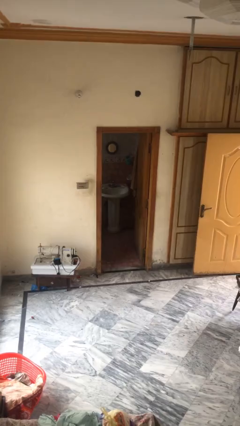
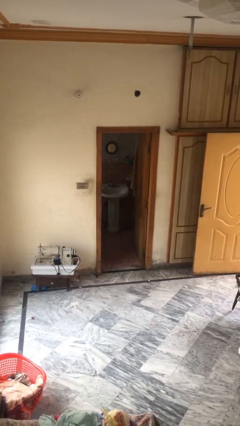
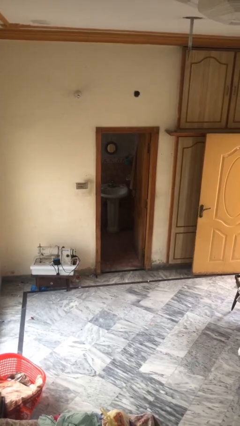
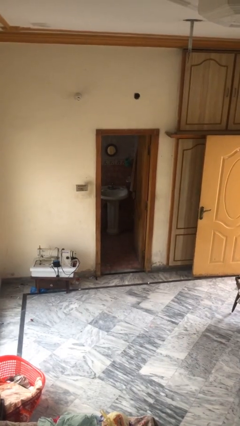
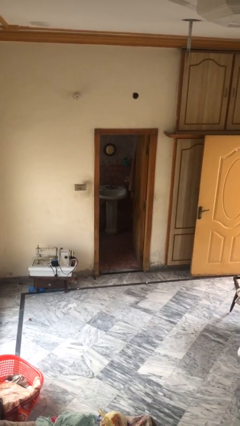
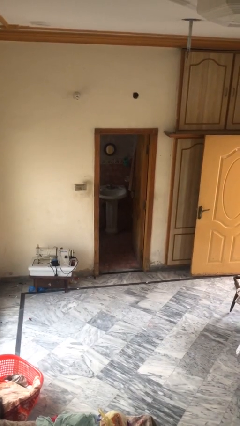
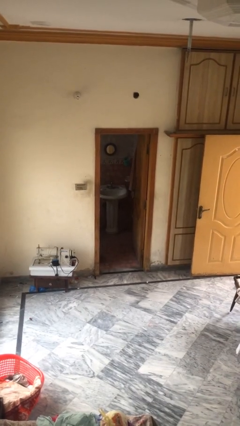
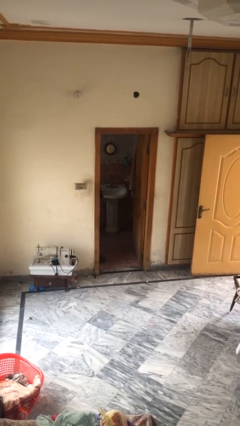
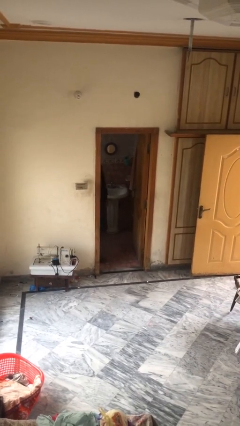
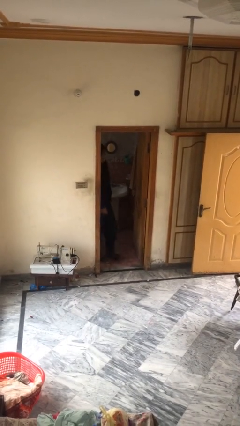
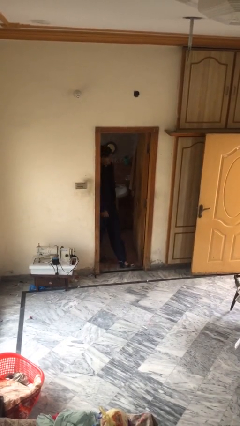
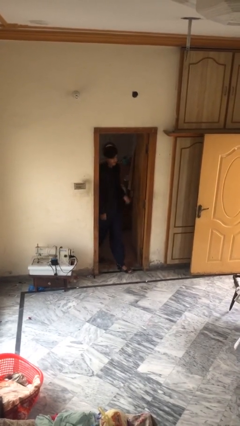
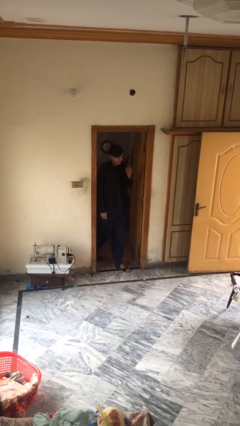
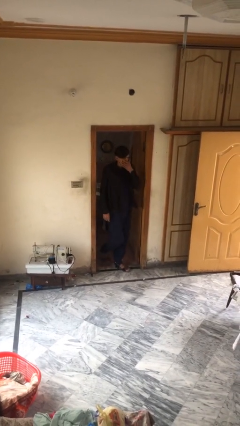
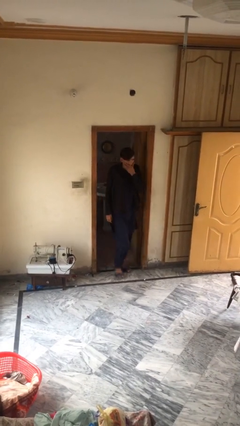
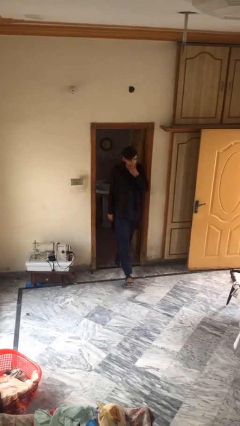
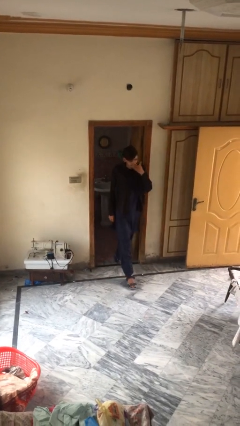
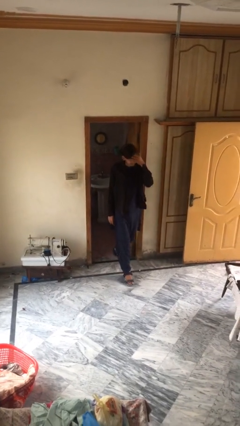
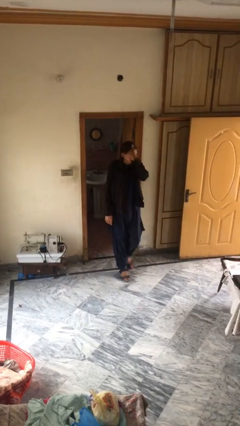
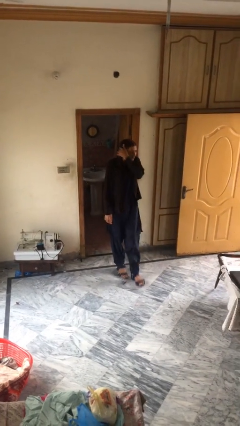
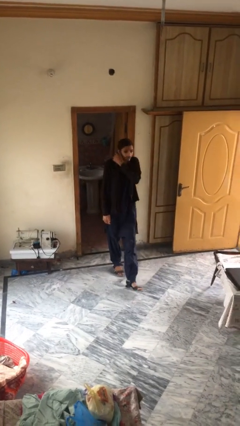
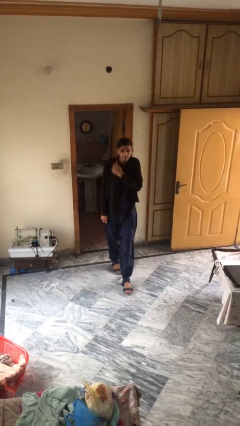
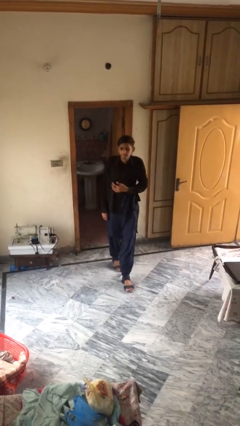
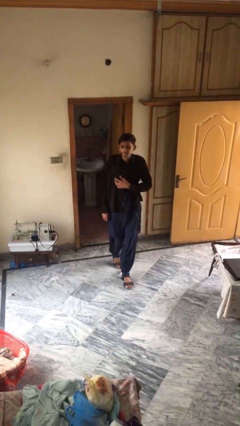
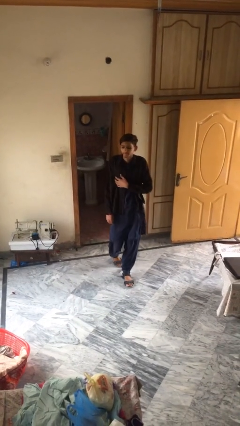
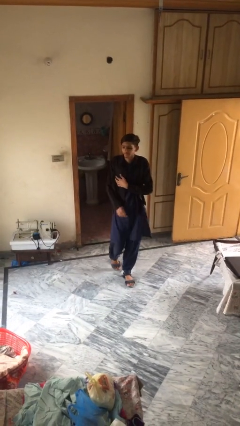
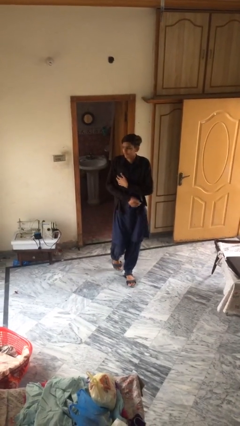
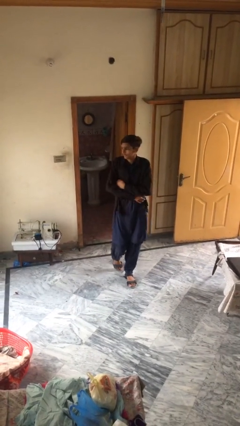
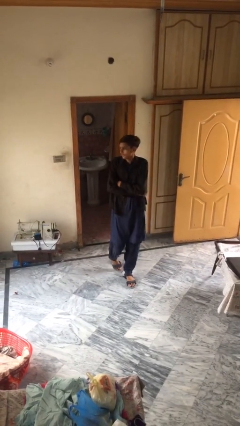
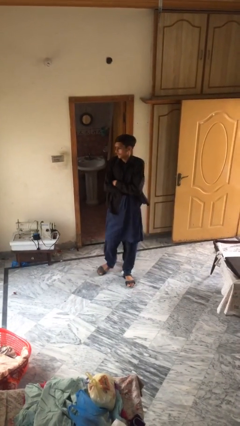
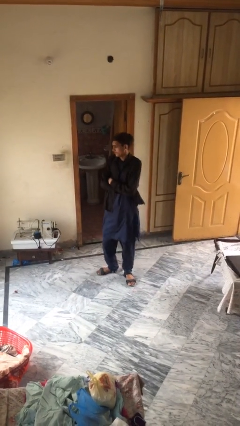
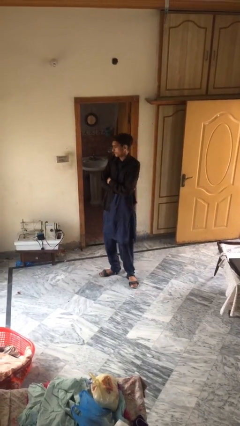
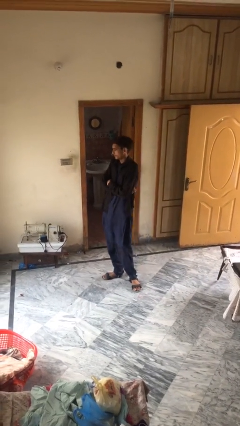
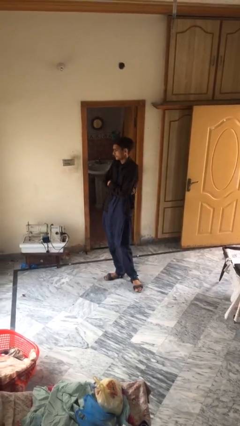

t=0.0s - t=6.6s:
person enters scene through structure

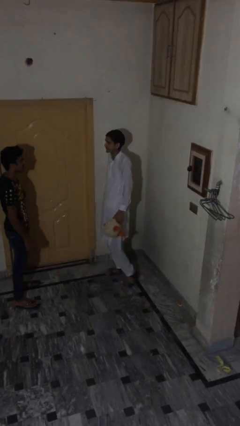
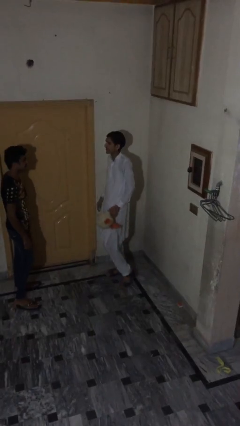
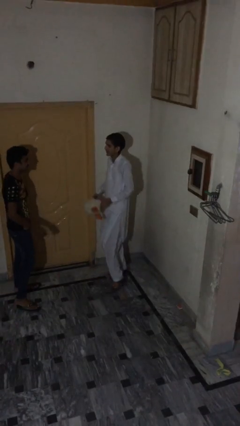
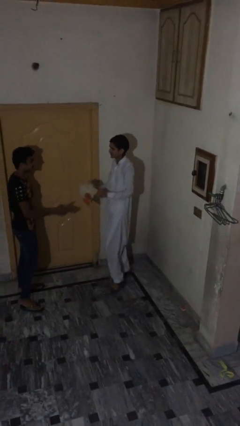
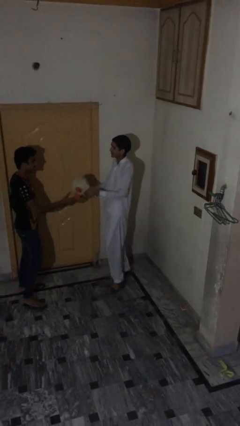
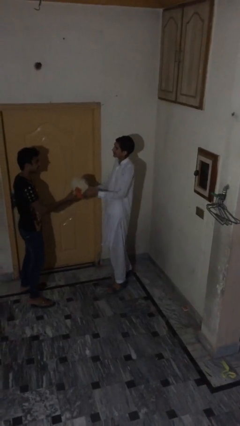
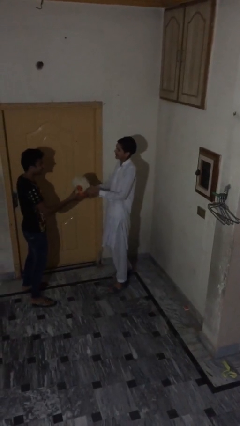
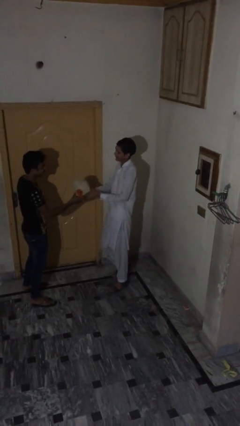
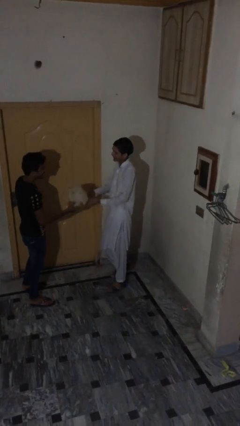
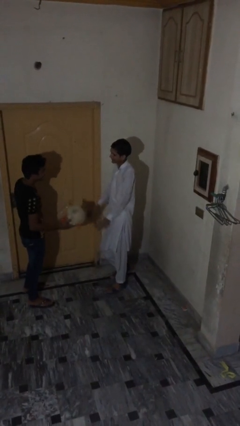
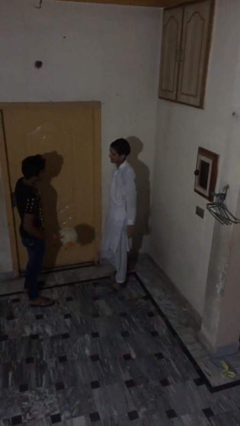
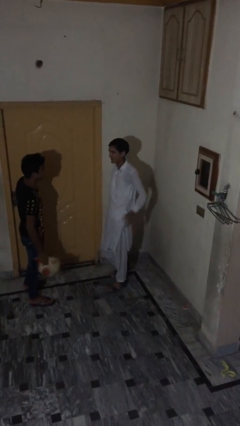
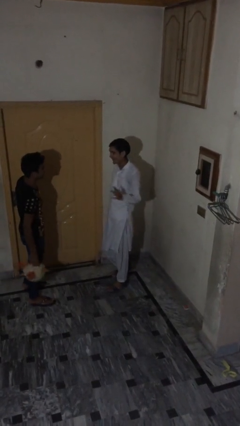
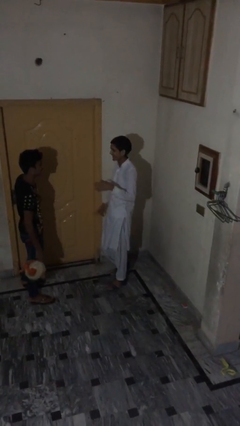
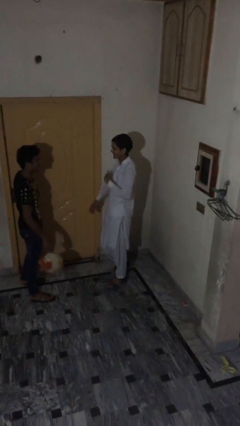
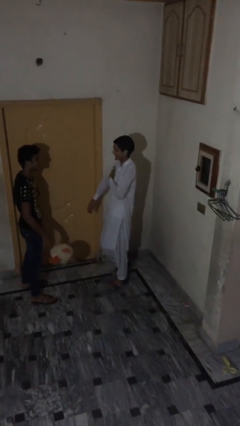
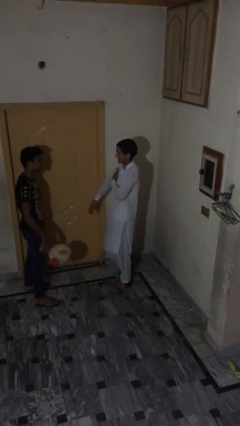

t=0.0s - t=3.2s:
person transfers object to person

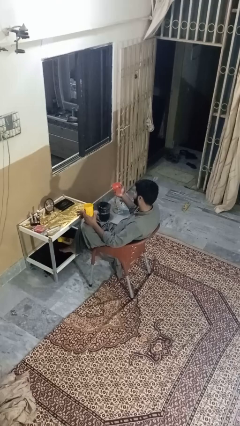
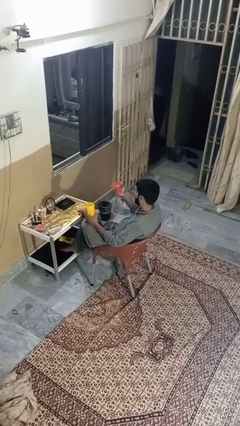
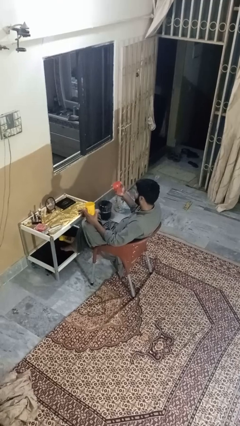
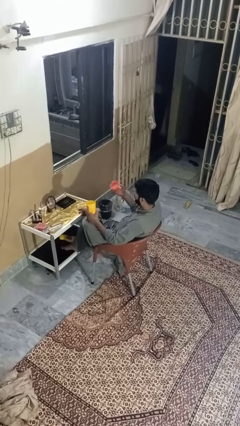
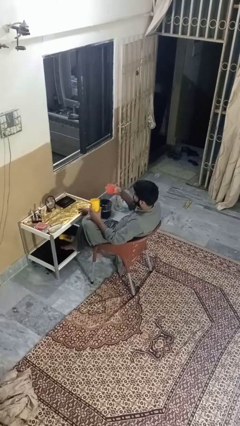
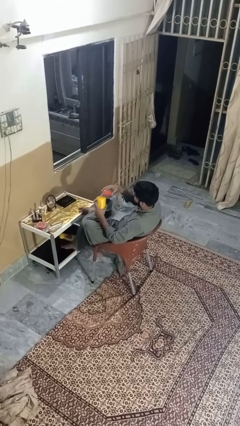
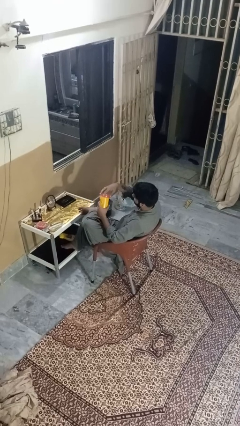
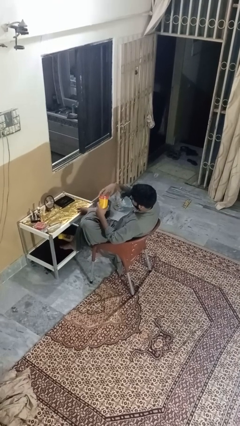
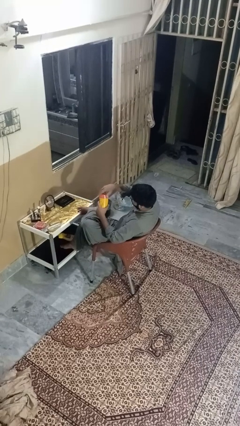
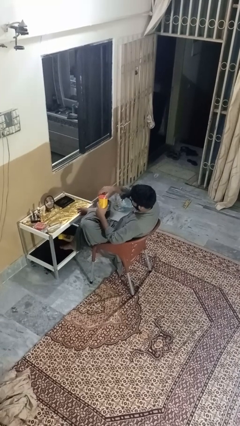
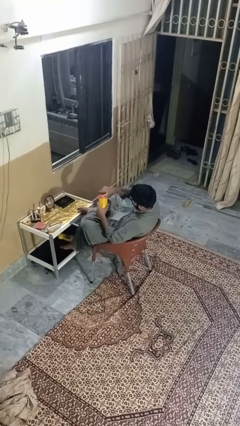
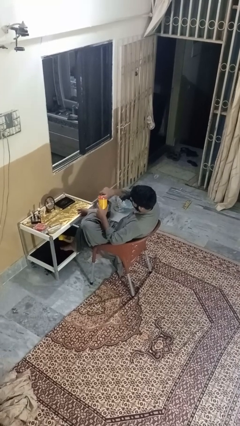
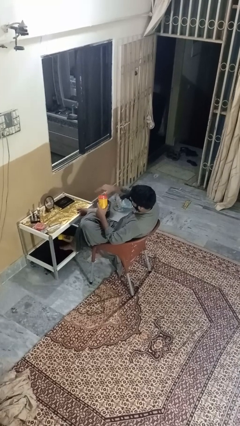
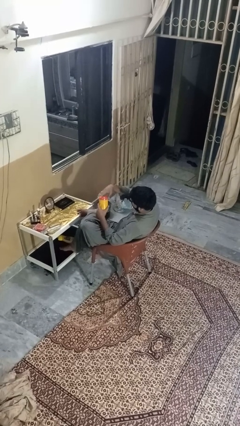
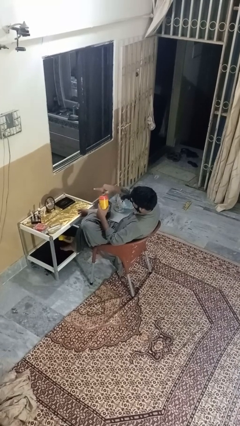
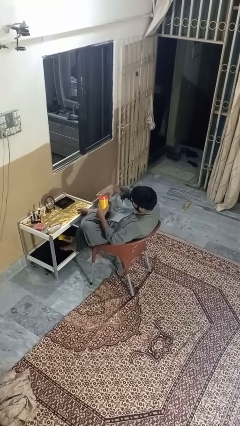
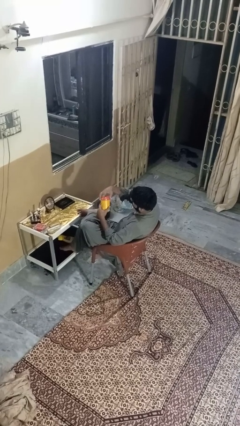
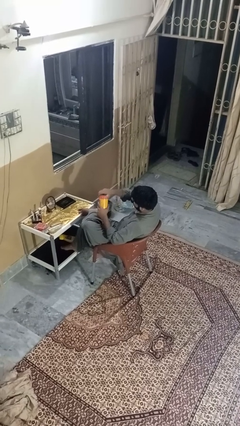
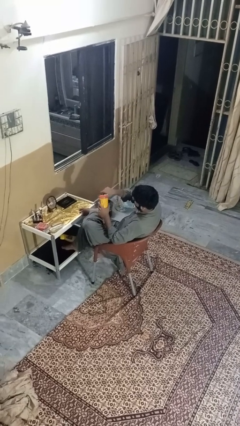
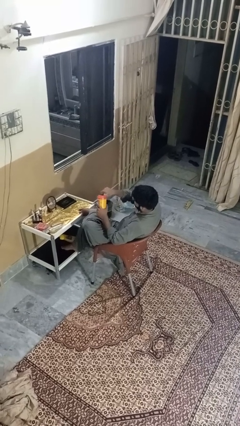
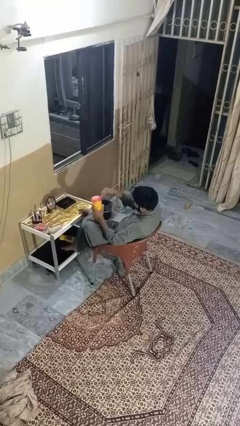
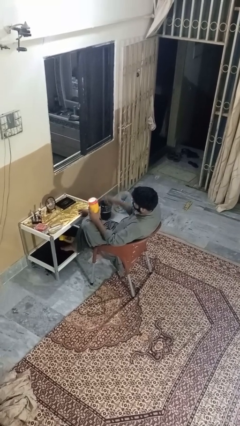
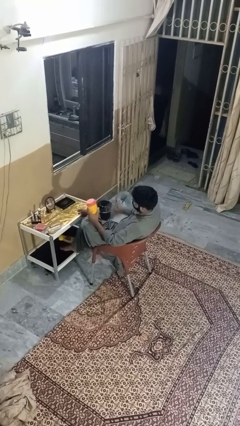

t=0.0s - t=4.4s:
person closes jar

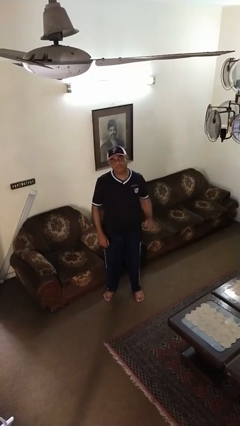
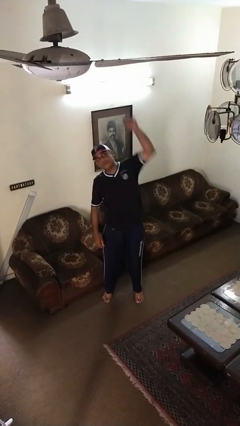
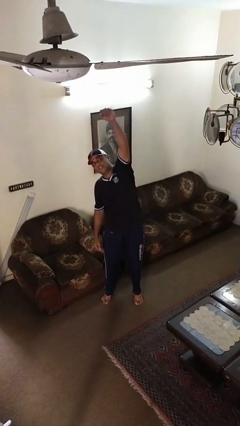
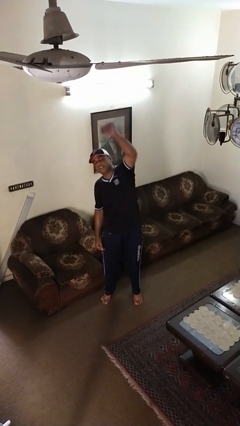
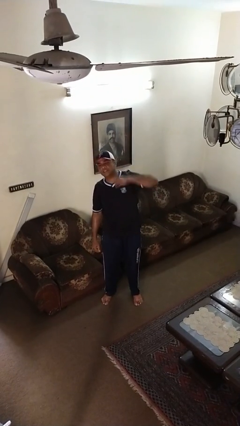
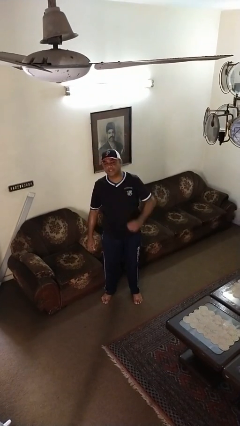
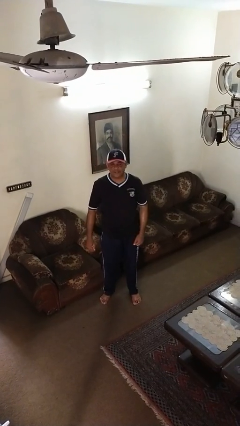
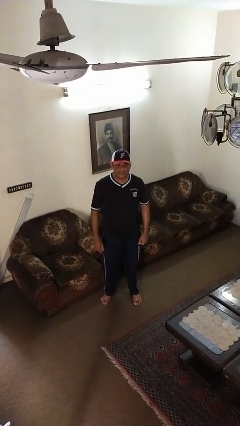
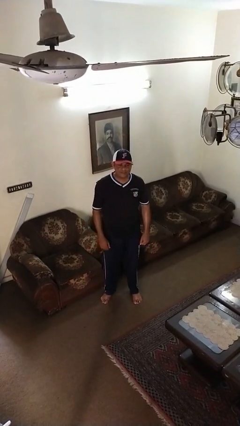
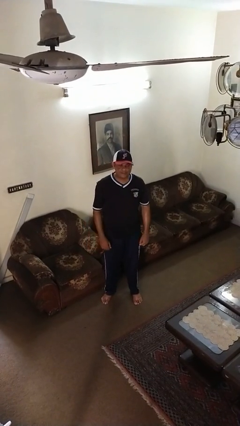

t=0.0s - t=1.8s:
person punches

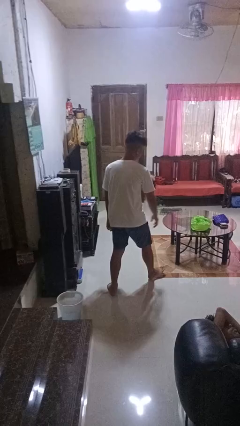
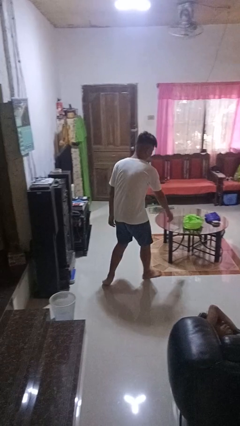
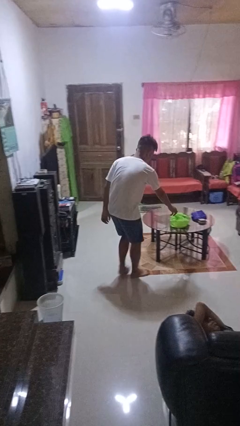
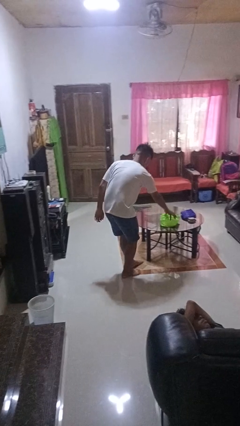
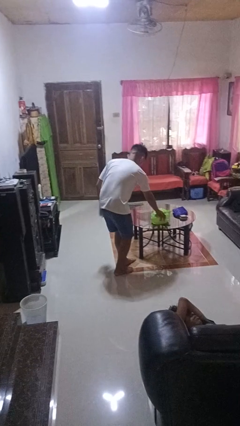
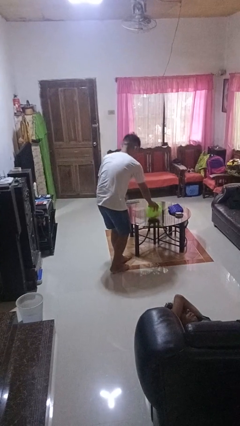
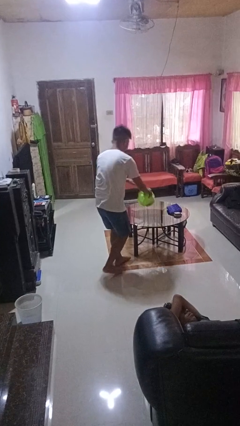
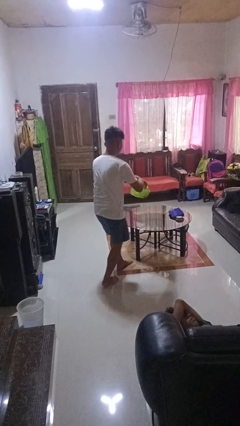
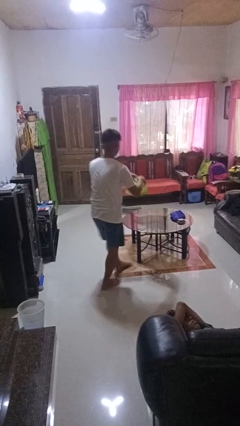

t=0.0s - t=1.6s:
person picks up object from table
